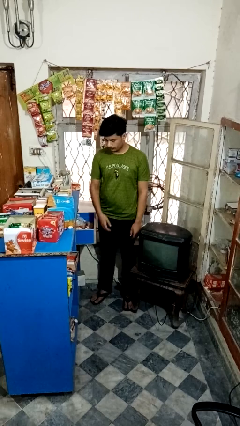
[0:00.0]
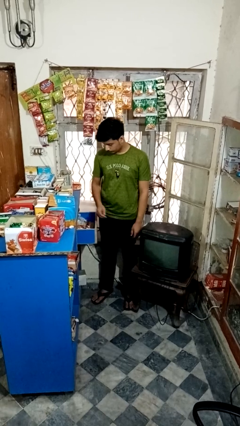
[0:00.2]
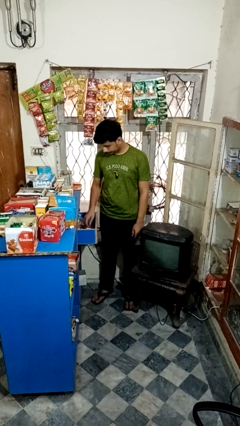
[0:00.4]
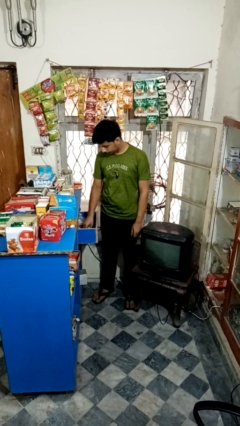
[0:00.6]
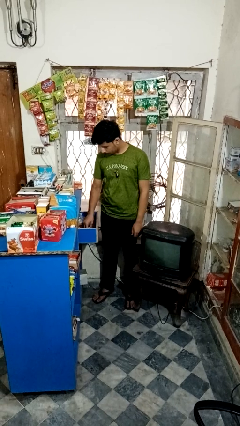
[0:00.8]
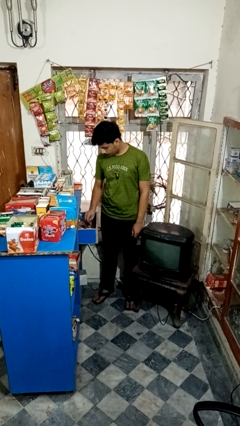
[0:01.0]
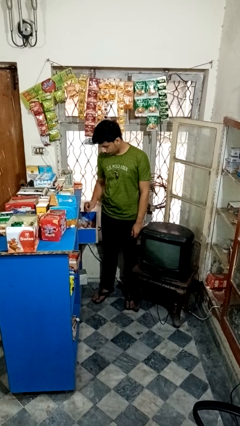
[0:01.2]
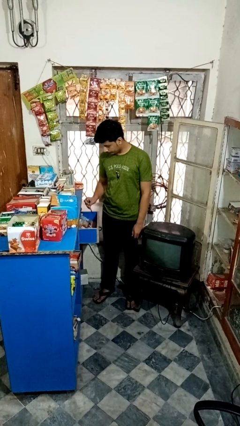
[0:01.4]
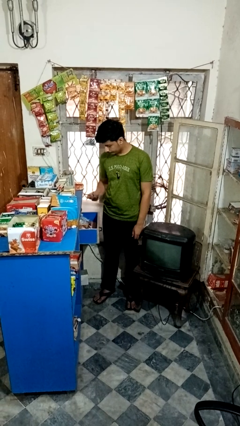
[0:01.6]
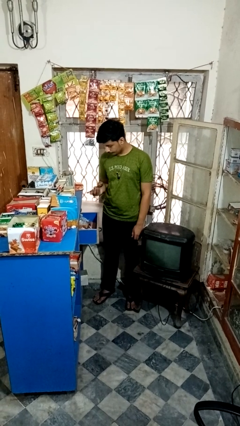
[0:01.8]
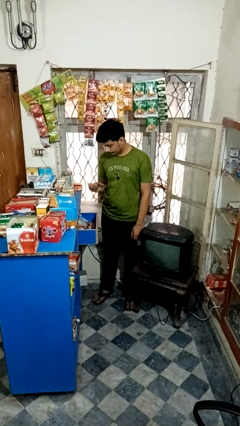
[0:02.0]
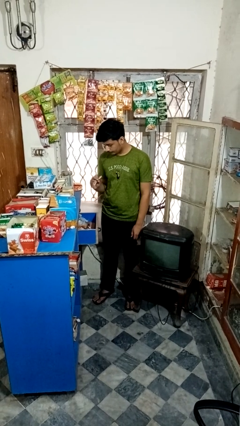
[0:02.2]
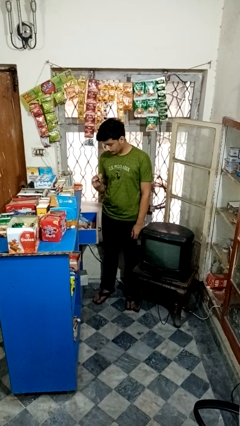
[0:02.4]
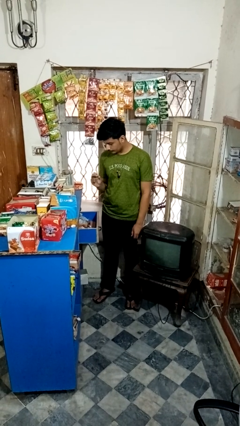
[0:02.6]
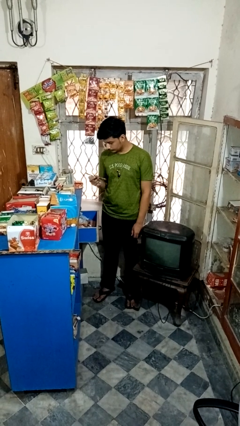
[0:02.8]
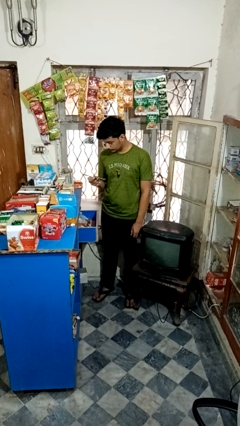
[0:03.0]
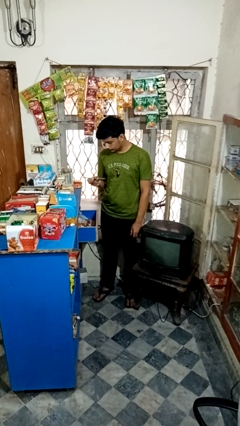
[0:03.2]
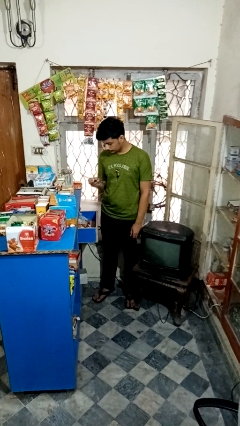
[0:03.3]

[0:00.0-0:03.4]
person searches in kitchen drawer

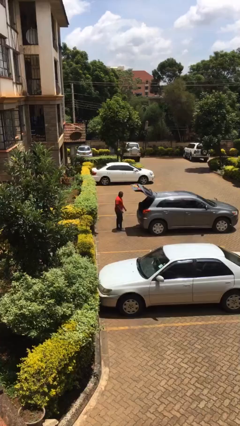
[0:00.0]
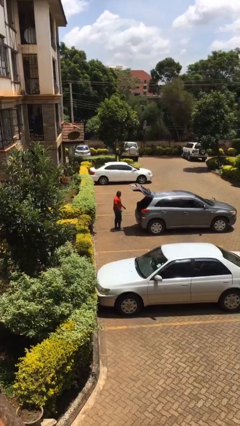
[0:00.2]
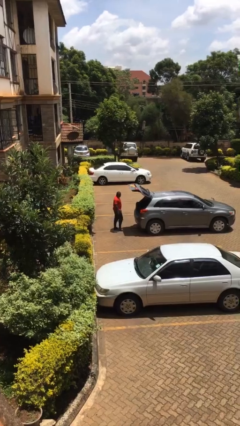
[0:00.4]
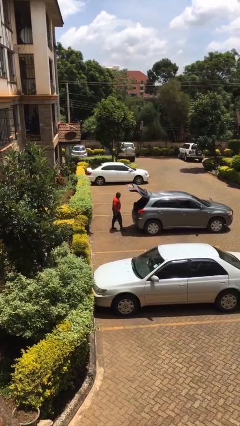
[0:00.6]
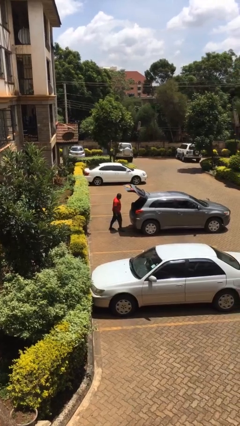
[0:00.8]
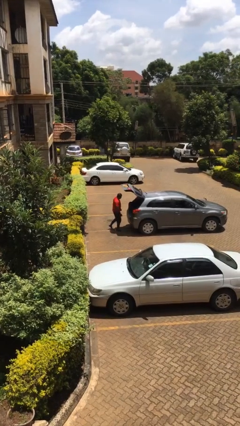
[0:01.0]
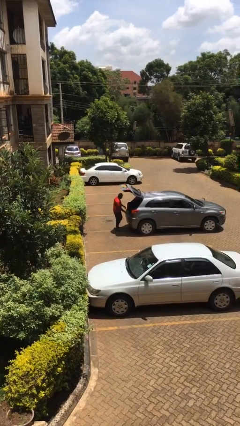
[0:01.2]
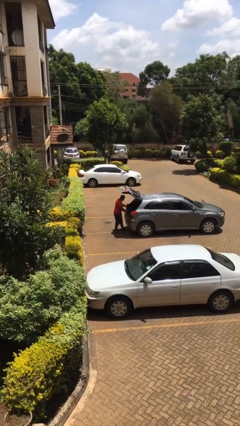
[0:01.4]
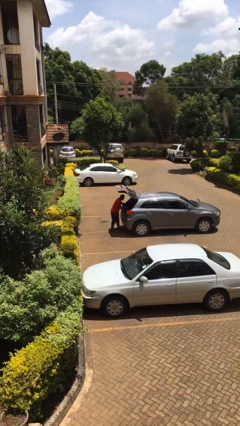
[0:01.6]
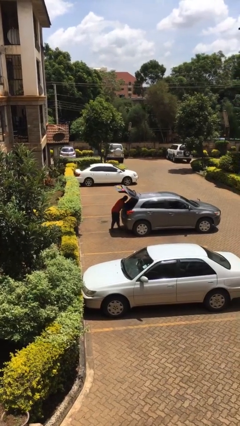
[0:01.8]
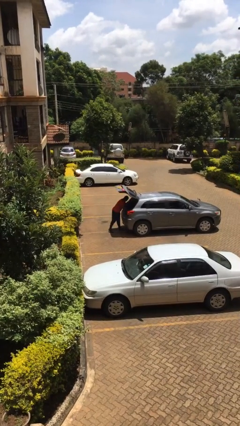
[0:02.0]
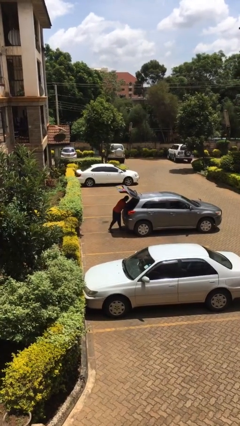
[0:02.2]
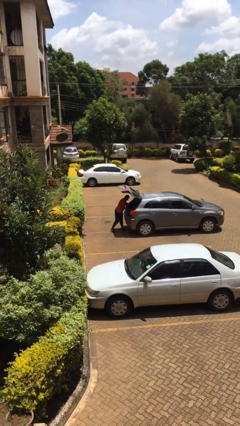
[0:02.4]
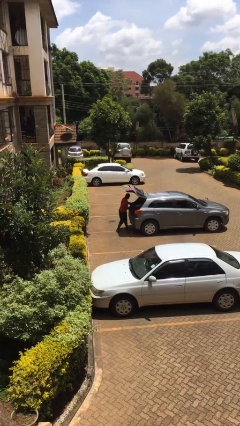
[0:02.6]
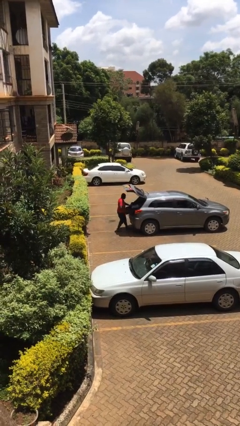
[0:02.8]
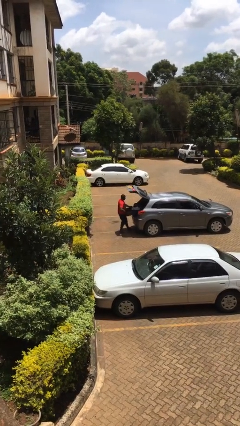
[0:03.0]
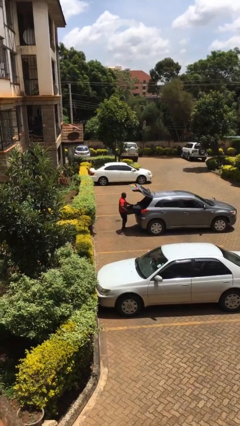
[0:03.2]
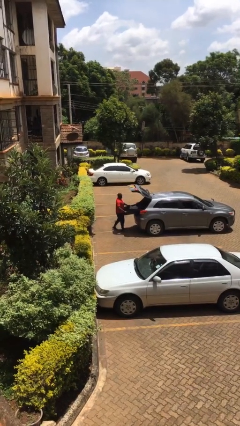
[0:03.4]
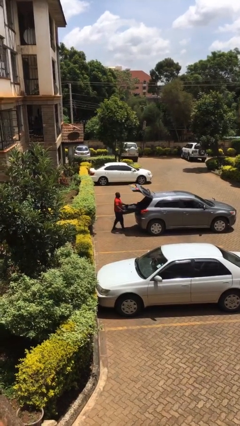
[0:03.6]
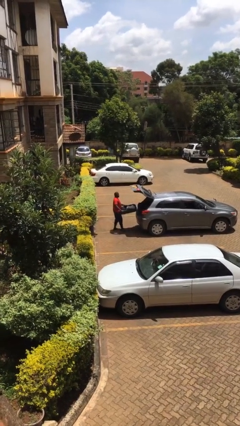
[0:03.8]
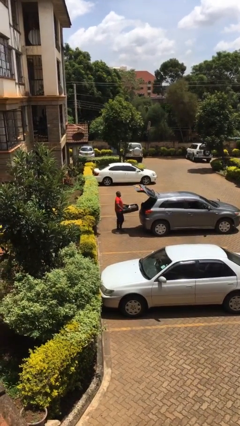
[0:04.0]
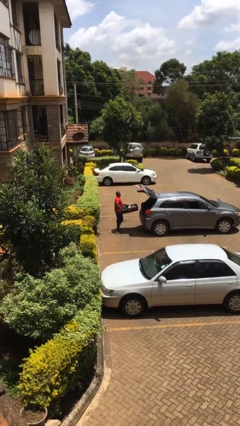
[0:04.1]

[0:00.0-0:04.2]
person unloads car

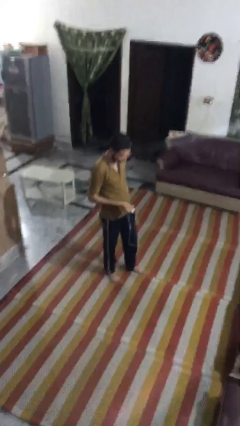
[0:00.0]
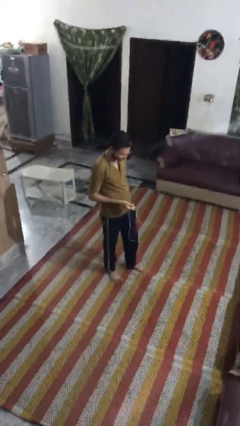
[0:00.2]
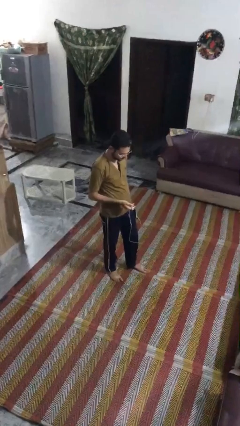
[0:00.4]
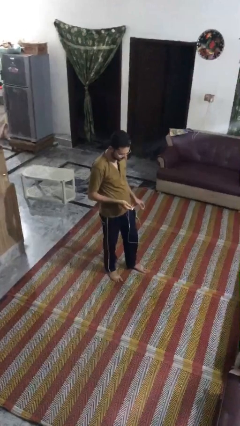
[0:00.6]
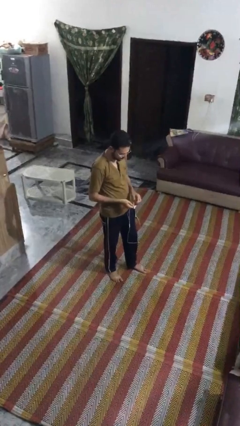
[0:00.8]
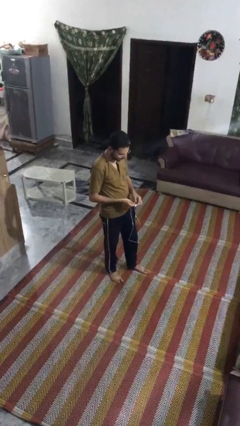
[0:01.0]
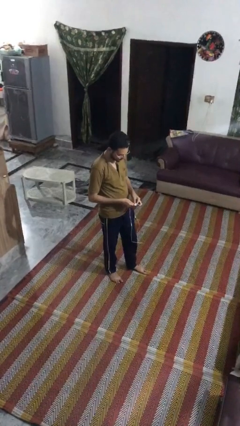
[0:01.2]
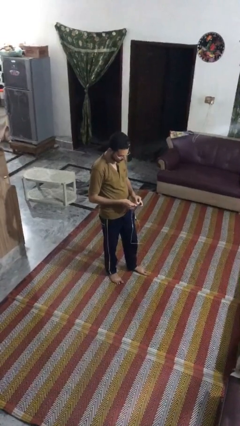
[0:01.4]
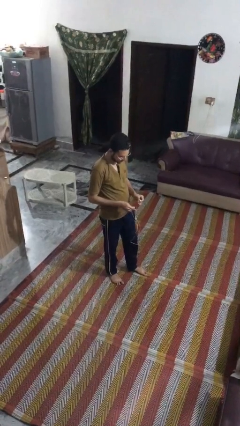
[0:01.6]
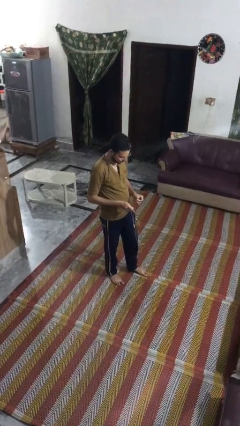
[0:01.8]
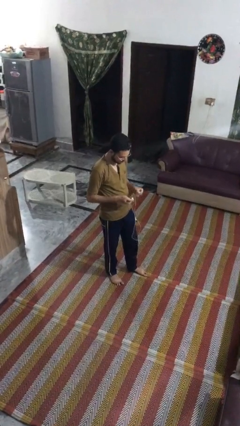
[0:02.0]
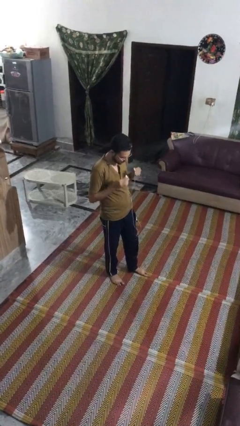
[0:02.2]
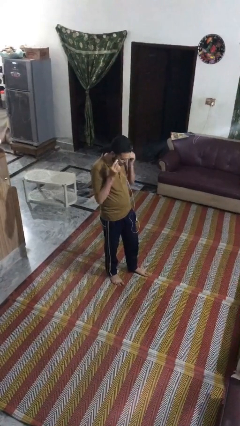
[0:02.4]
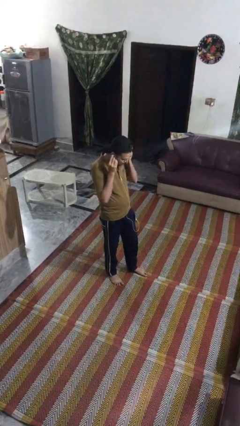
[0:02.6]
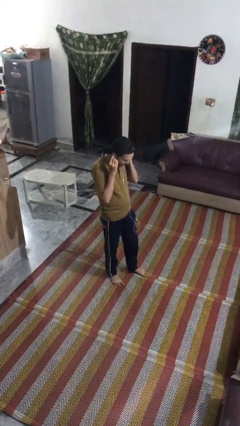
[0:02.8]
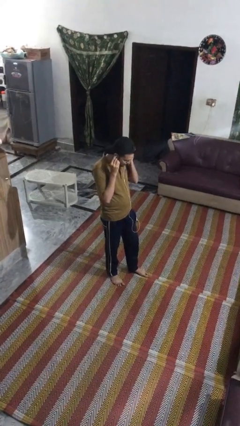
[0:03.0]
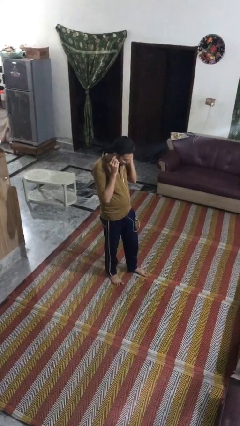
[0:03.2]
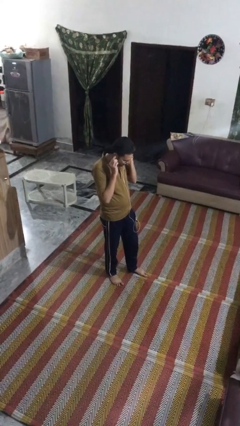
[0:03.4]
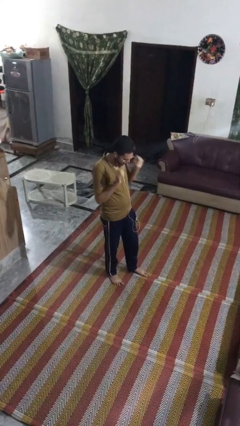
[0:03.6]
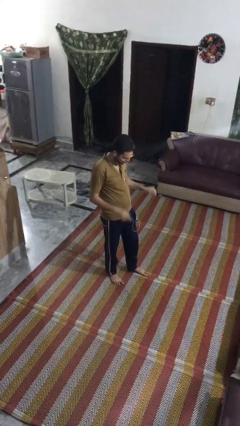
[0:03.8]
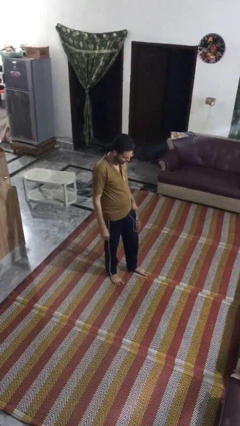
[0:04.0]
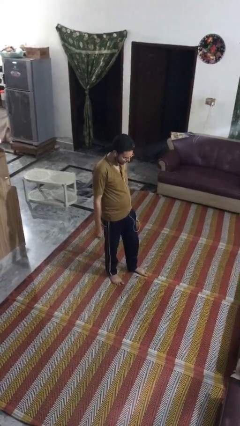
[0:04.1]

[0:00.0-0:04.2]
person puts on headphones

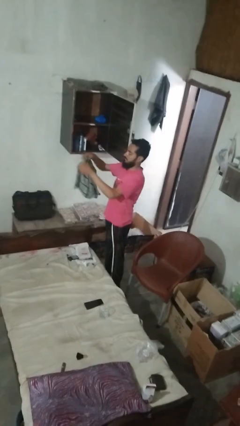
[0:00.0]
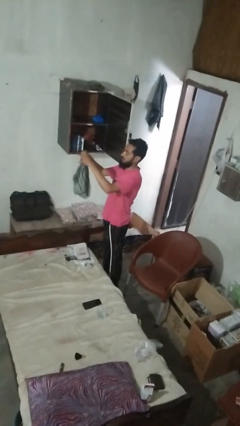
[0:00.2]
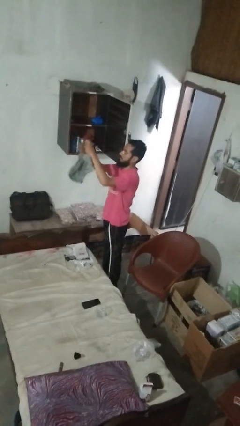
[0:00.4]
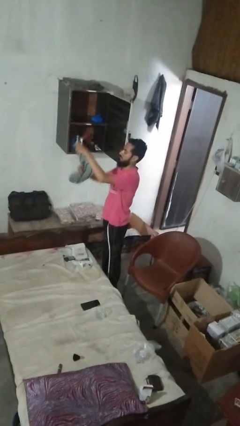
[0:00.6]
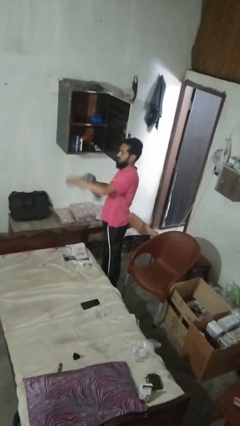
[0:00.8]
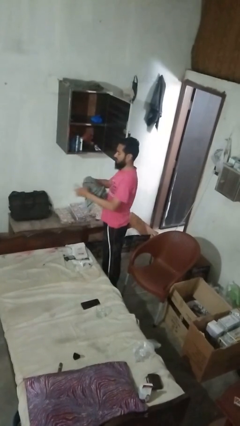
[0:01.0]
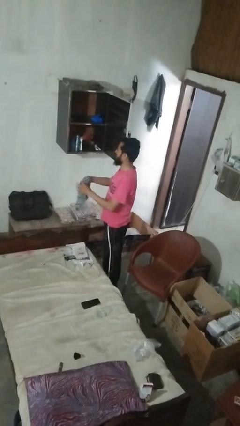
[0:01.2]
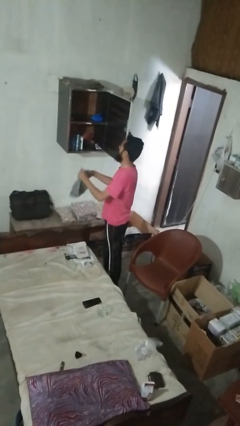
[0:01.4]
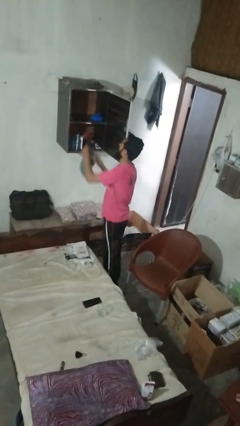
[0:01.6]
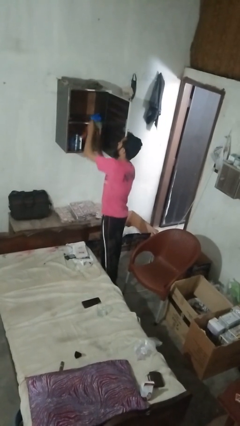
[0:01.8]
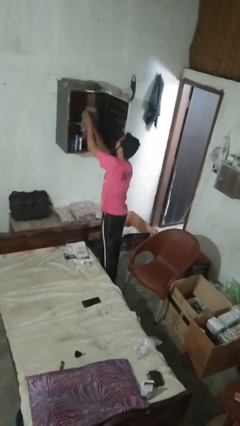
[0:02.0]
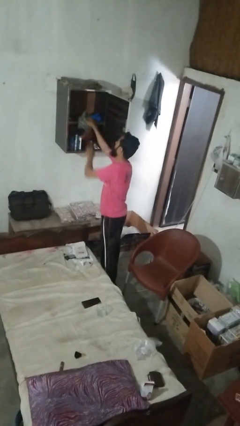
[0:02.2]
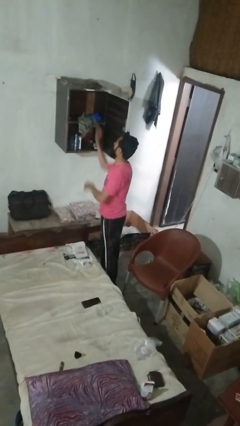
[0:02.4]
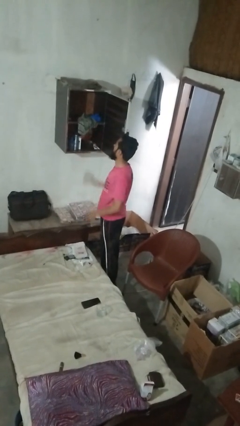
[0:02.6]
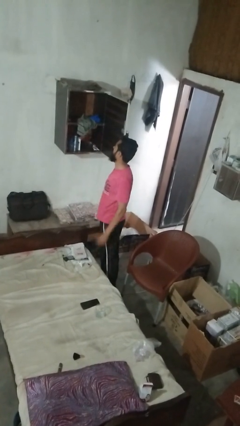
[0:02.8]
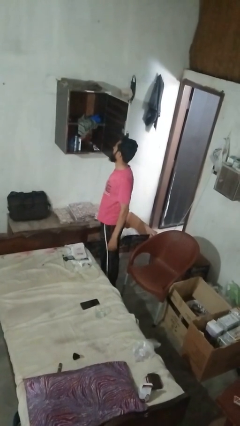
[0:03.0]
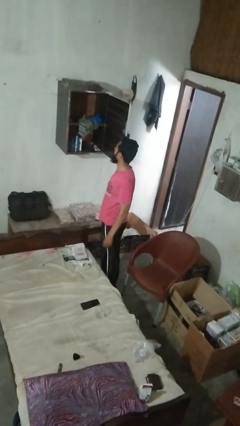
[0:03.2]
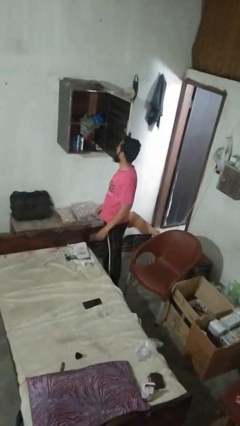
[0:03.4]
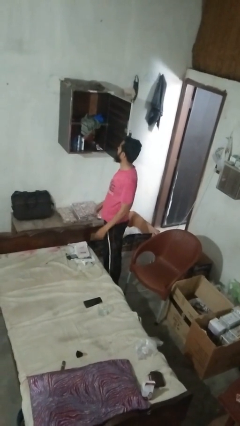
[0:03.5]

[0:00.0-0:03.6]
person puts clothes into dresser

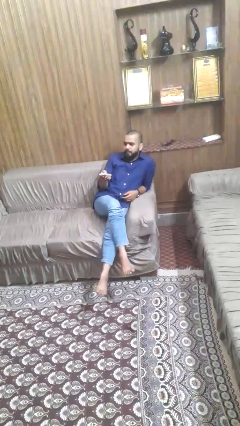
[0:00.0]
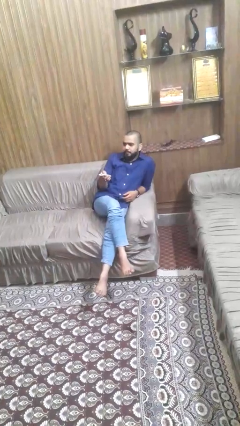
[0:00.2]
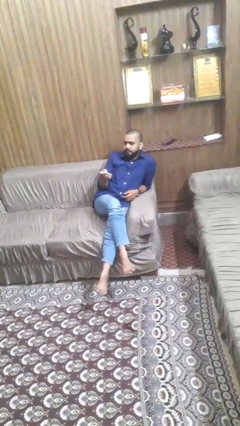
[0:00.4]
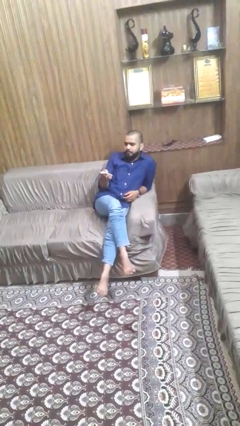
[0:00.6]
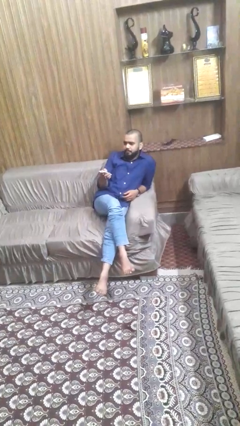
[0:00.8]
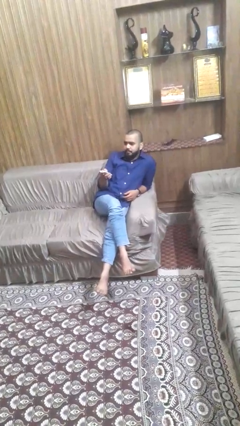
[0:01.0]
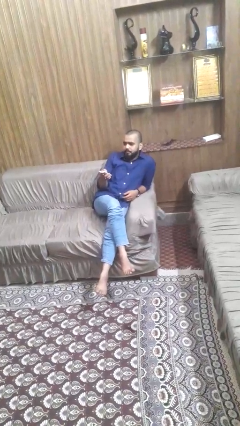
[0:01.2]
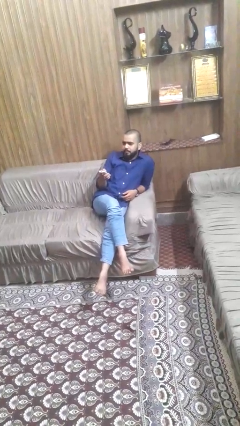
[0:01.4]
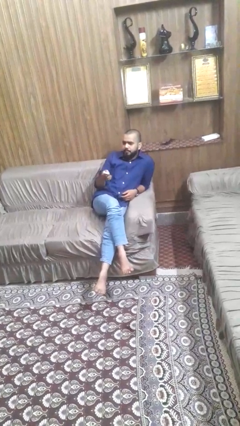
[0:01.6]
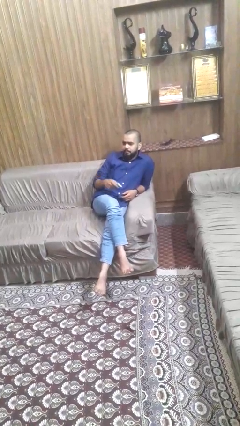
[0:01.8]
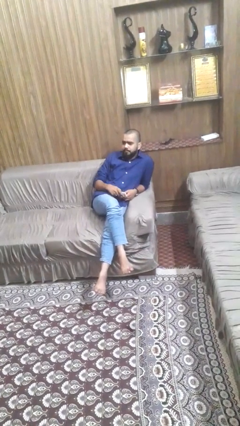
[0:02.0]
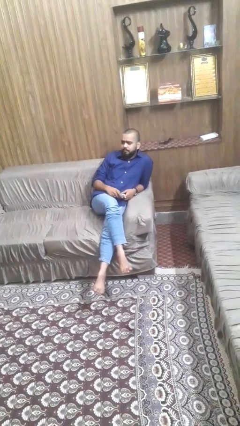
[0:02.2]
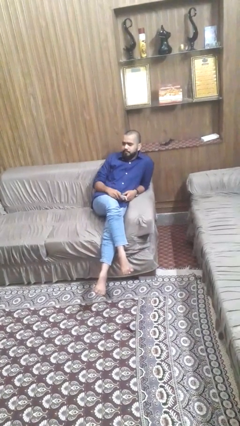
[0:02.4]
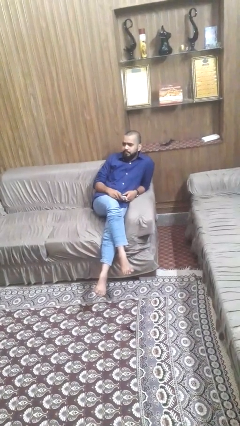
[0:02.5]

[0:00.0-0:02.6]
person uses television remote
